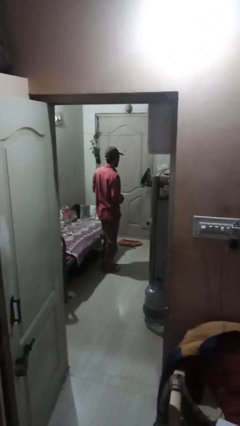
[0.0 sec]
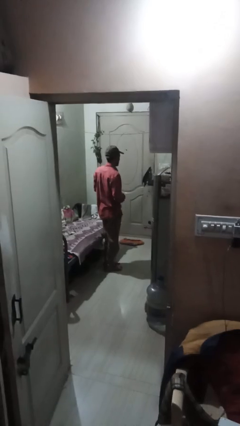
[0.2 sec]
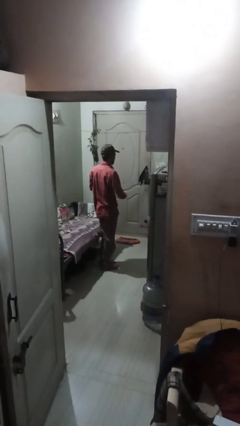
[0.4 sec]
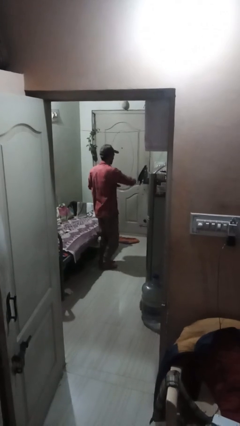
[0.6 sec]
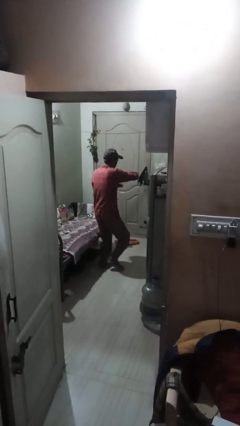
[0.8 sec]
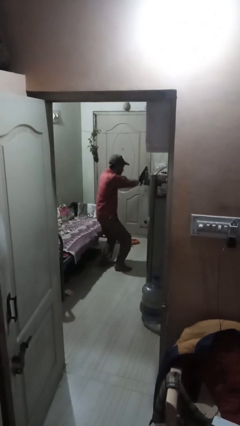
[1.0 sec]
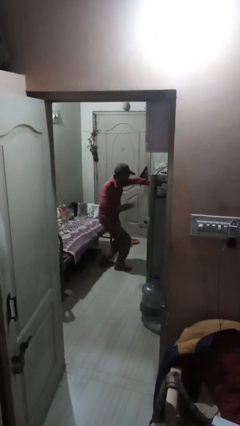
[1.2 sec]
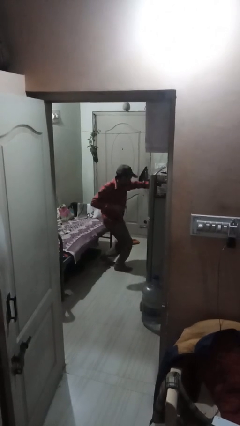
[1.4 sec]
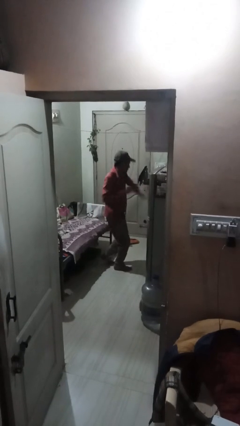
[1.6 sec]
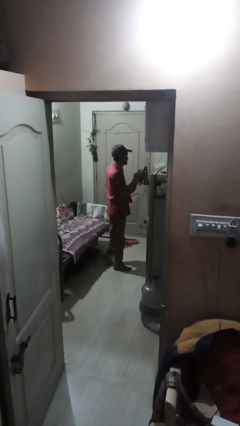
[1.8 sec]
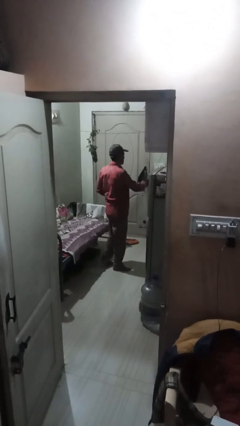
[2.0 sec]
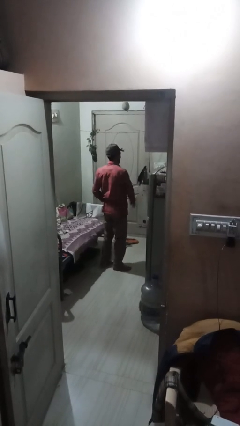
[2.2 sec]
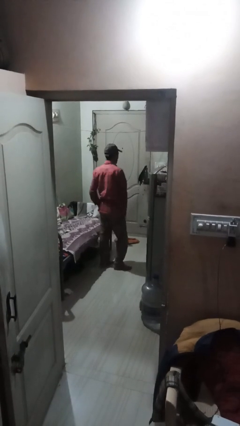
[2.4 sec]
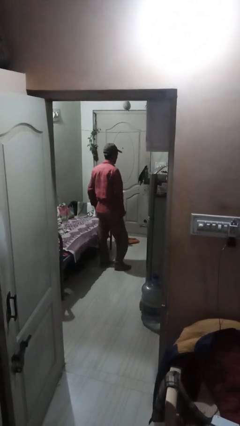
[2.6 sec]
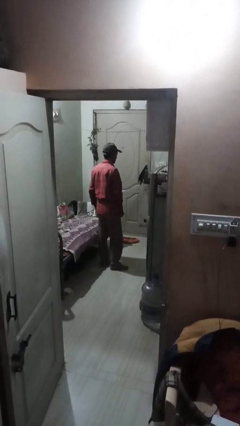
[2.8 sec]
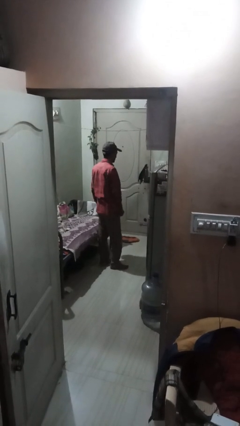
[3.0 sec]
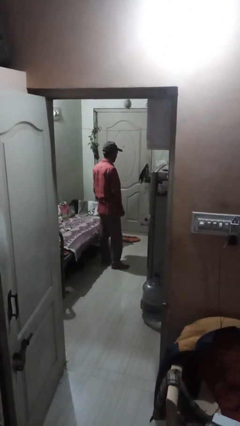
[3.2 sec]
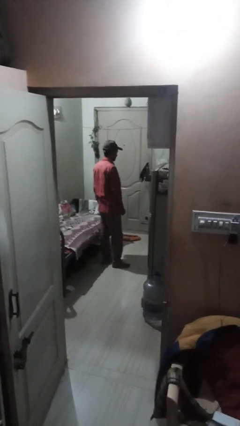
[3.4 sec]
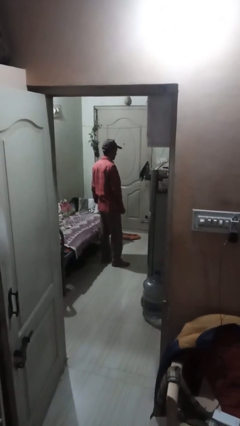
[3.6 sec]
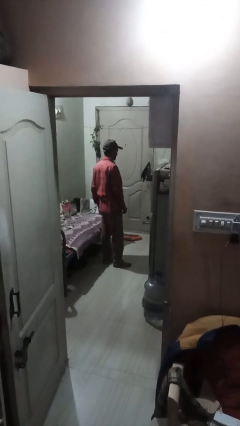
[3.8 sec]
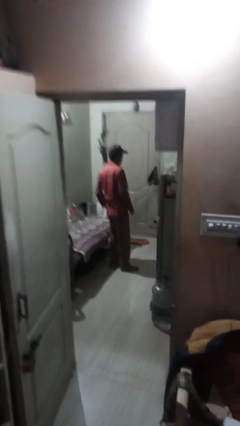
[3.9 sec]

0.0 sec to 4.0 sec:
person karate chop

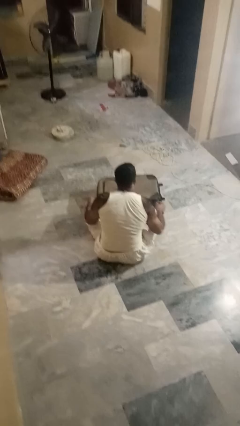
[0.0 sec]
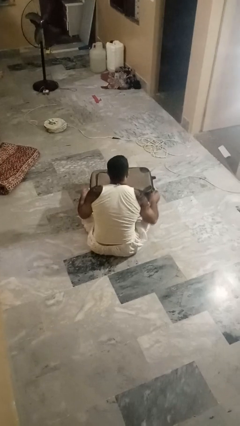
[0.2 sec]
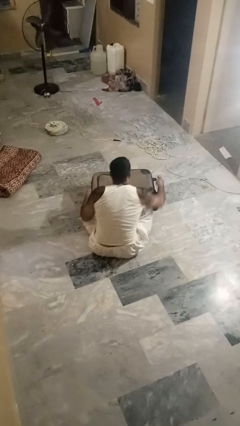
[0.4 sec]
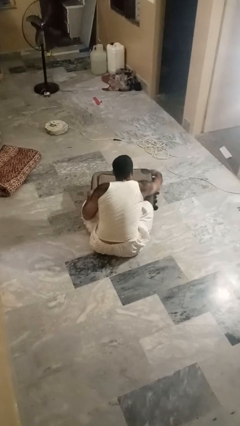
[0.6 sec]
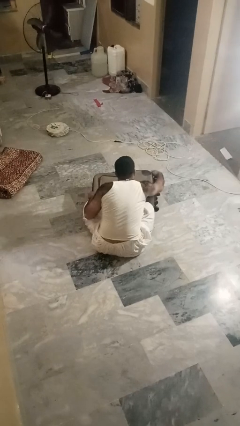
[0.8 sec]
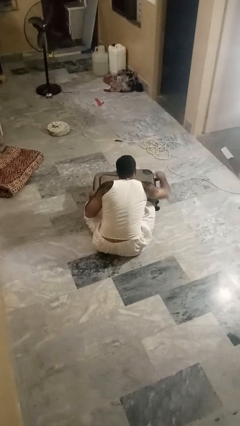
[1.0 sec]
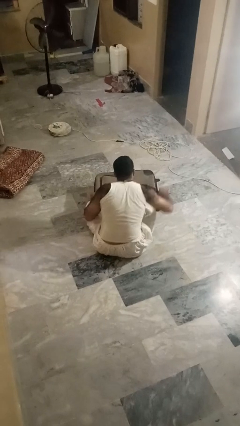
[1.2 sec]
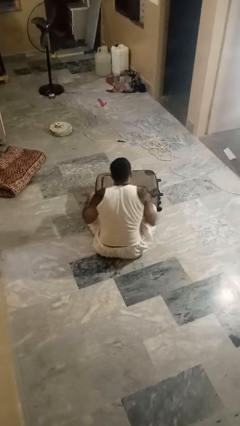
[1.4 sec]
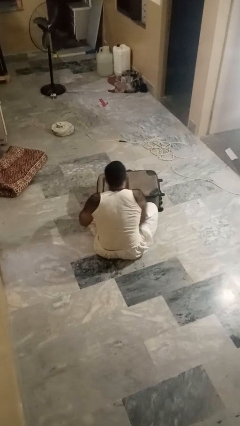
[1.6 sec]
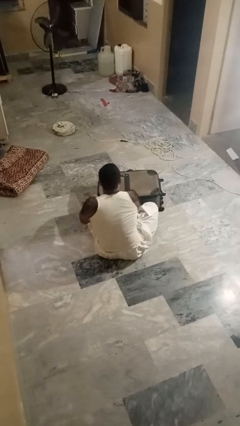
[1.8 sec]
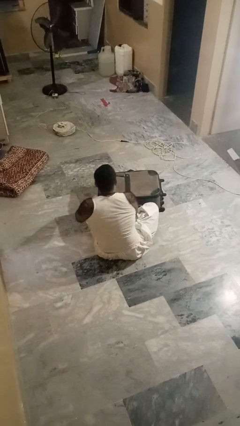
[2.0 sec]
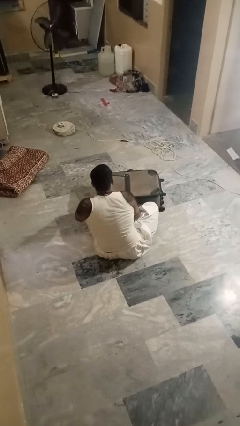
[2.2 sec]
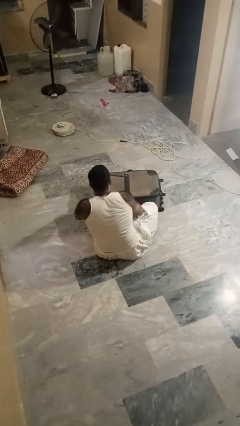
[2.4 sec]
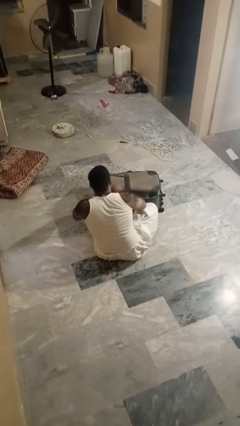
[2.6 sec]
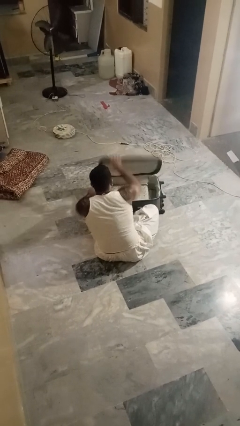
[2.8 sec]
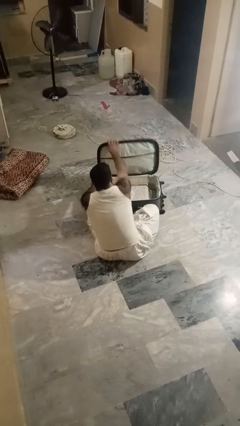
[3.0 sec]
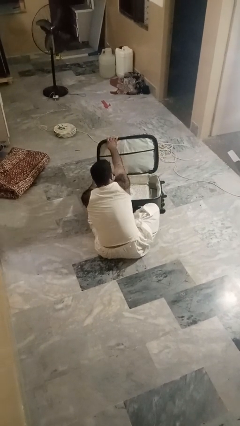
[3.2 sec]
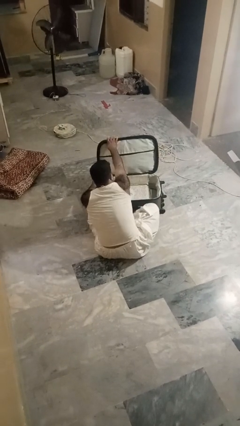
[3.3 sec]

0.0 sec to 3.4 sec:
person opens suitcase

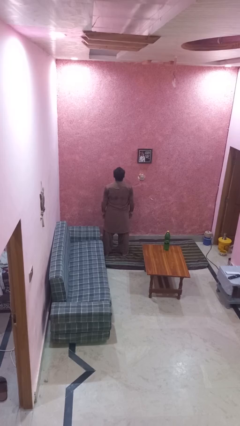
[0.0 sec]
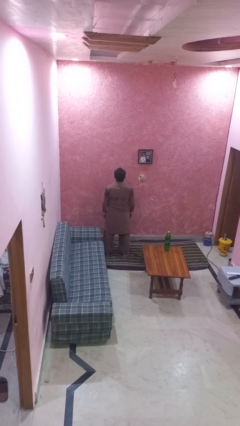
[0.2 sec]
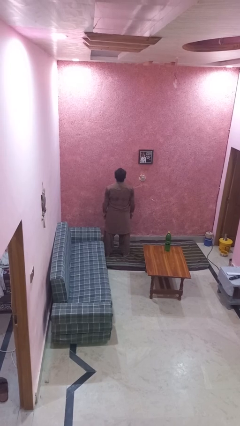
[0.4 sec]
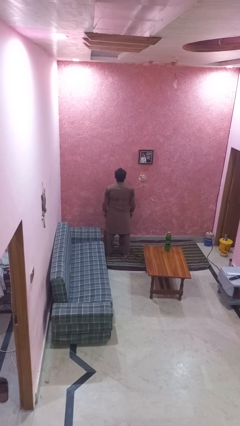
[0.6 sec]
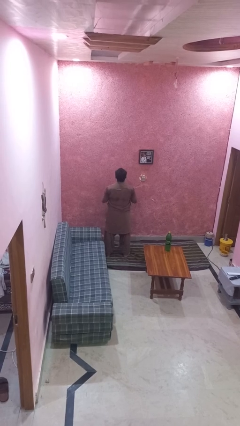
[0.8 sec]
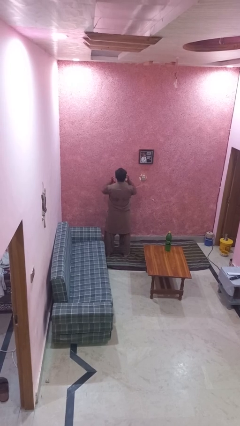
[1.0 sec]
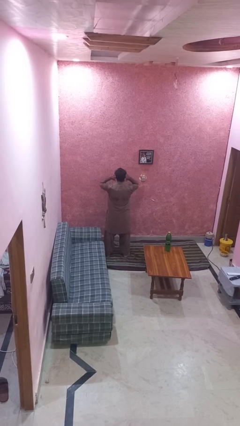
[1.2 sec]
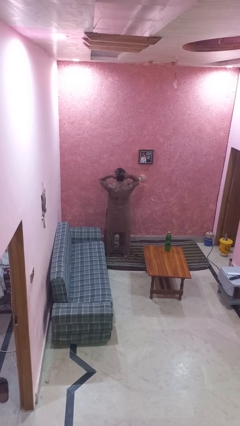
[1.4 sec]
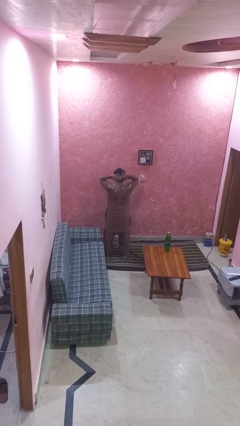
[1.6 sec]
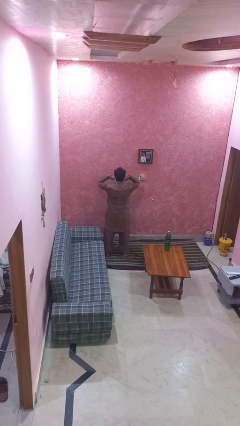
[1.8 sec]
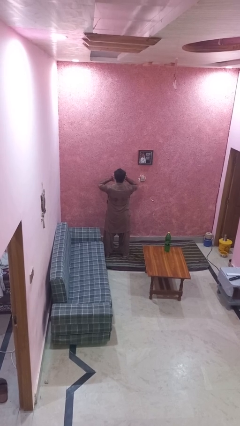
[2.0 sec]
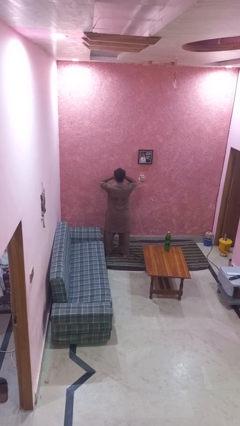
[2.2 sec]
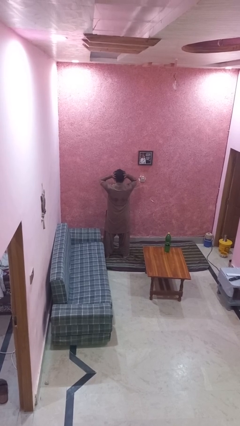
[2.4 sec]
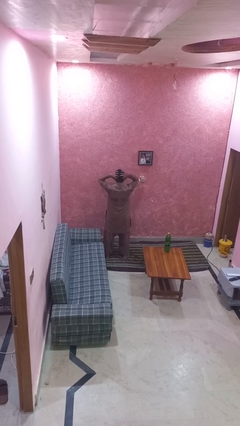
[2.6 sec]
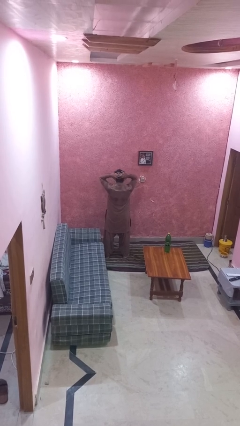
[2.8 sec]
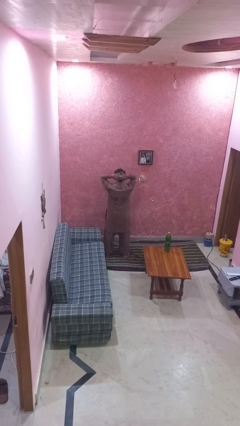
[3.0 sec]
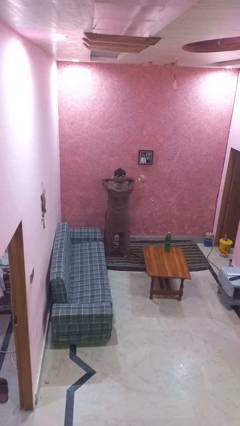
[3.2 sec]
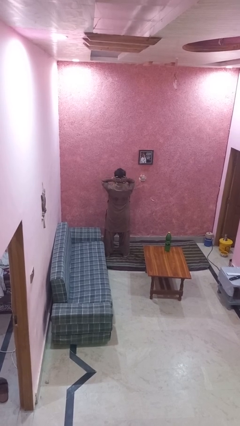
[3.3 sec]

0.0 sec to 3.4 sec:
person strokes hair

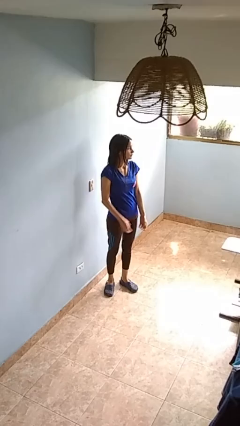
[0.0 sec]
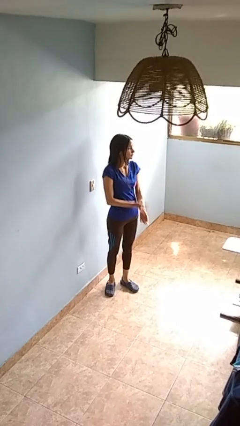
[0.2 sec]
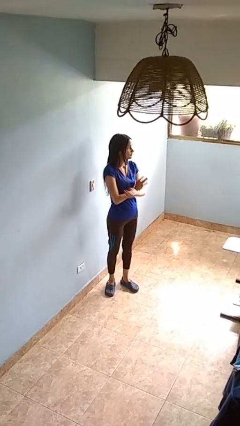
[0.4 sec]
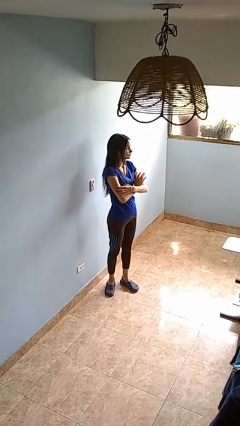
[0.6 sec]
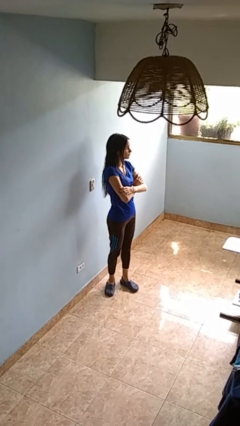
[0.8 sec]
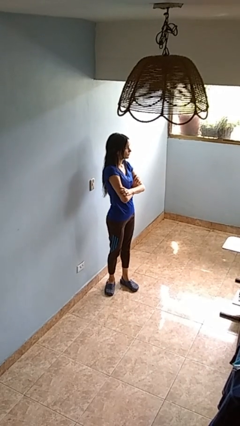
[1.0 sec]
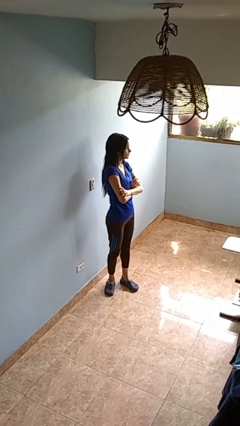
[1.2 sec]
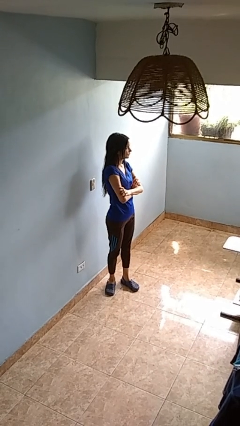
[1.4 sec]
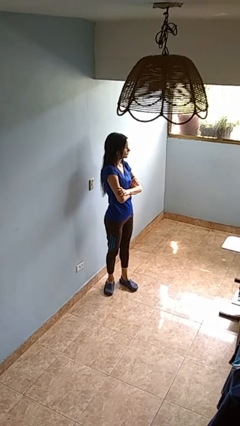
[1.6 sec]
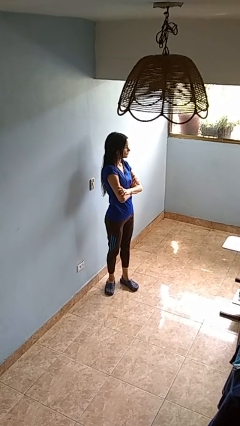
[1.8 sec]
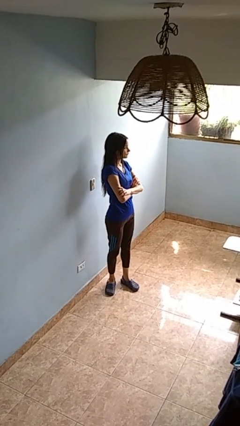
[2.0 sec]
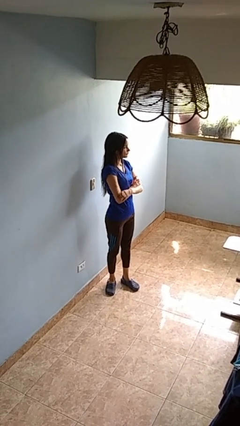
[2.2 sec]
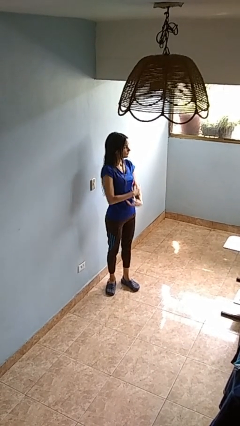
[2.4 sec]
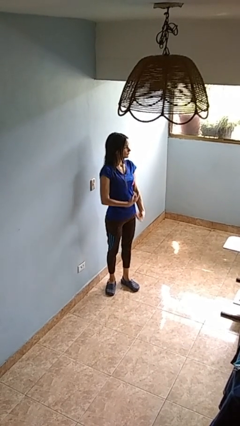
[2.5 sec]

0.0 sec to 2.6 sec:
person crosses arms

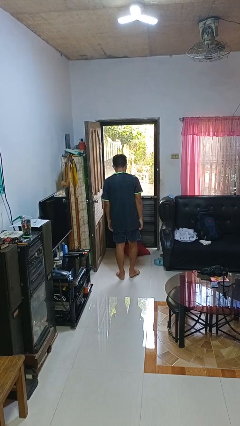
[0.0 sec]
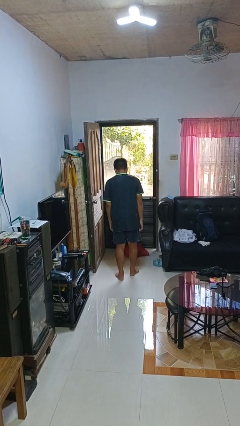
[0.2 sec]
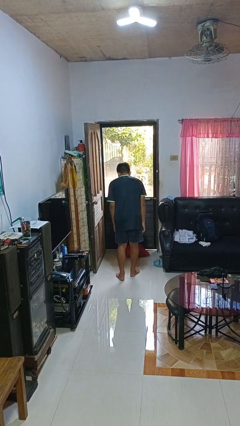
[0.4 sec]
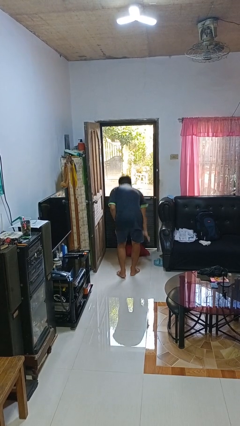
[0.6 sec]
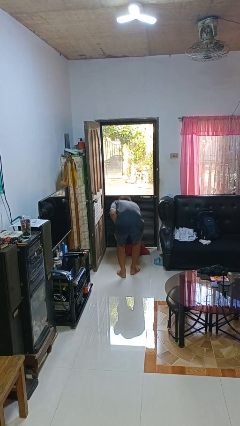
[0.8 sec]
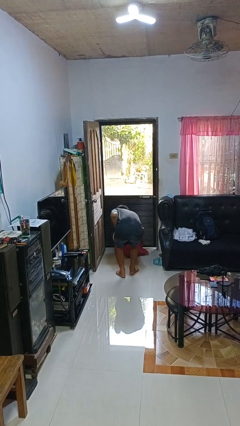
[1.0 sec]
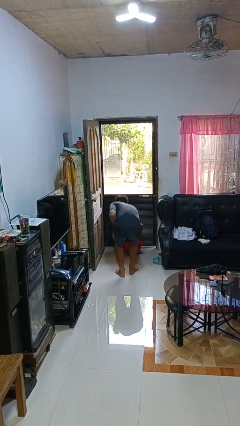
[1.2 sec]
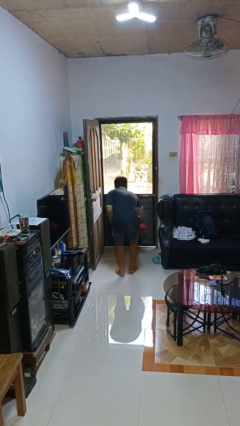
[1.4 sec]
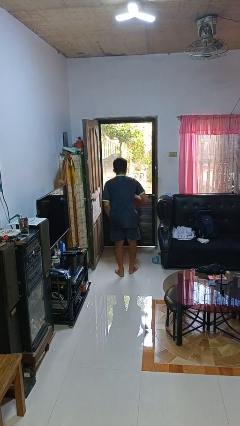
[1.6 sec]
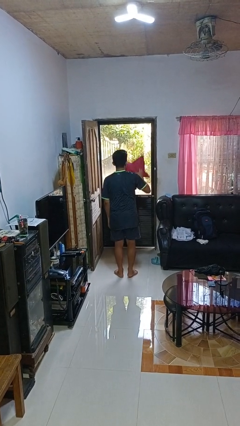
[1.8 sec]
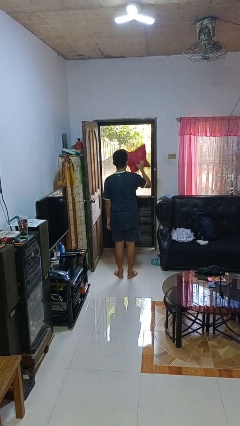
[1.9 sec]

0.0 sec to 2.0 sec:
person picks up object from floor

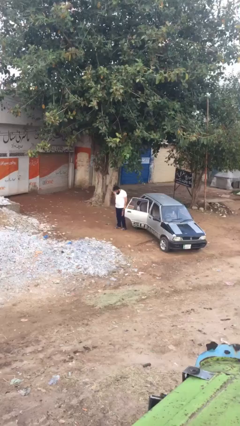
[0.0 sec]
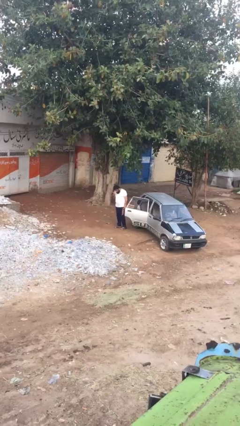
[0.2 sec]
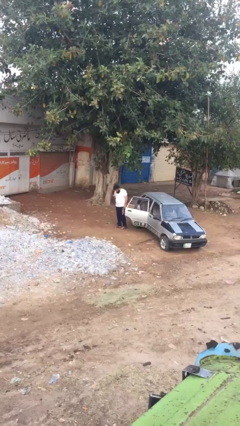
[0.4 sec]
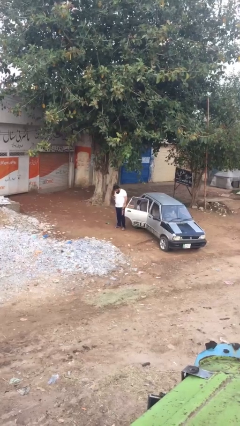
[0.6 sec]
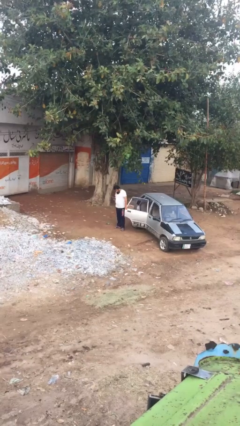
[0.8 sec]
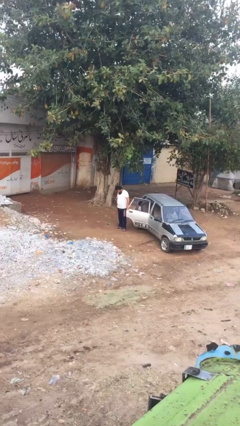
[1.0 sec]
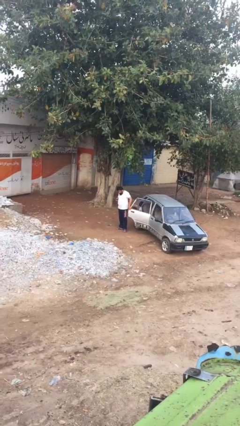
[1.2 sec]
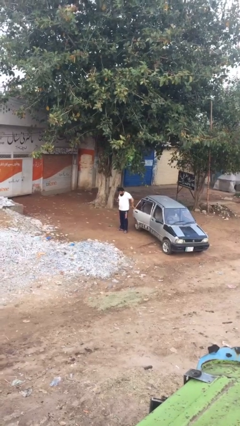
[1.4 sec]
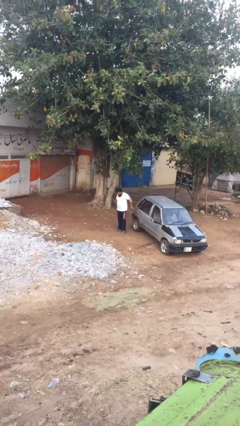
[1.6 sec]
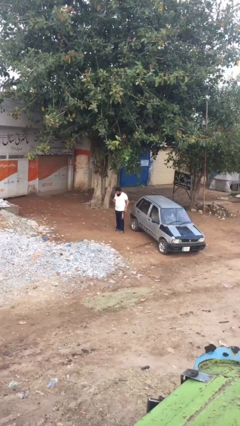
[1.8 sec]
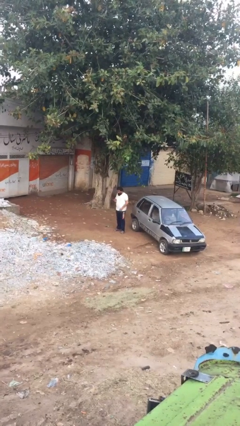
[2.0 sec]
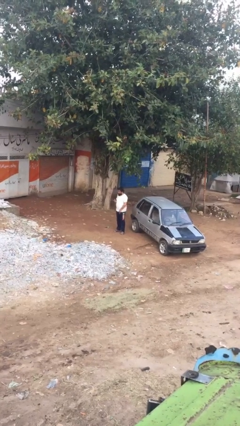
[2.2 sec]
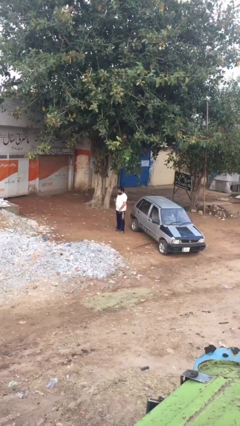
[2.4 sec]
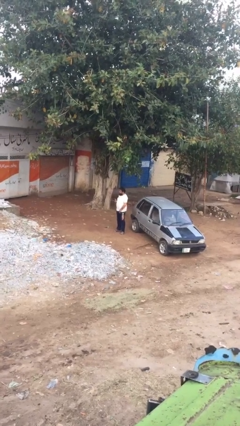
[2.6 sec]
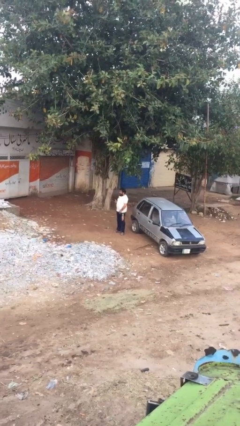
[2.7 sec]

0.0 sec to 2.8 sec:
person closes car door
